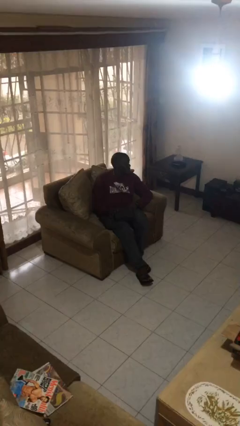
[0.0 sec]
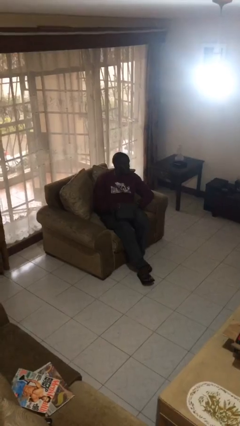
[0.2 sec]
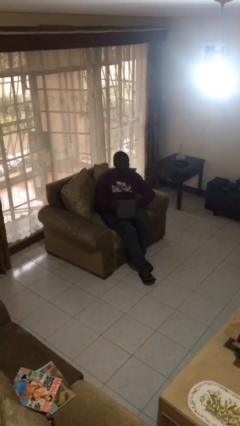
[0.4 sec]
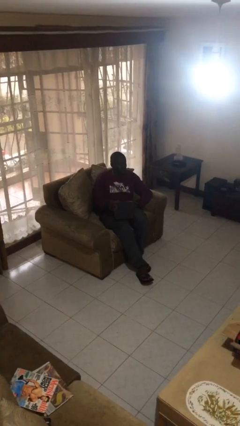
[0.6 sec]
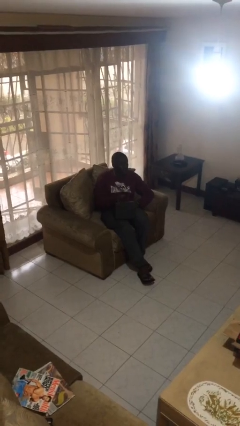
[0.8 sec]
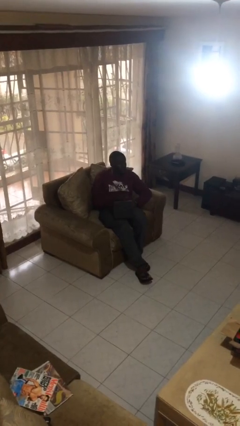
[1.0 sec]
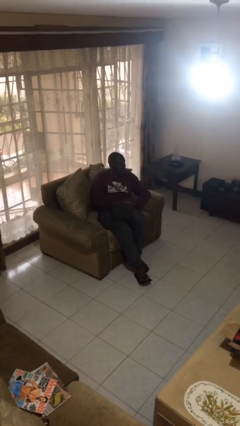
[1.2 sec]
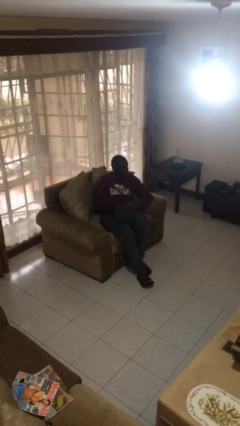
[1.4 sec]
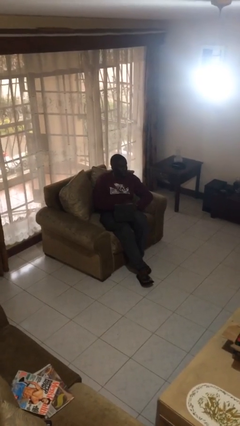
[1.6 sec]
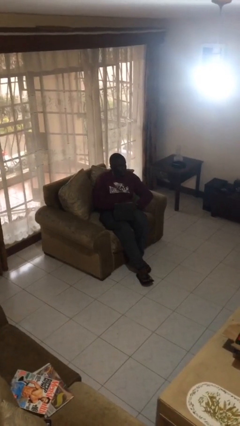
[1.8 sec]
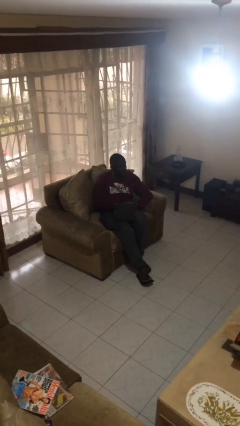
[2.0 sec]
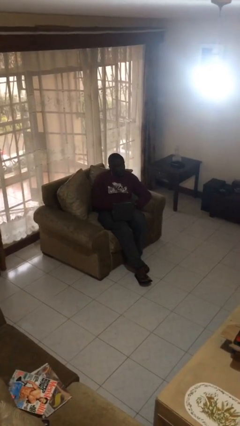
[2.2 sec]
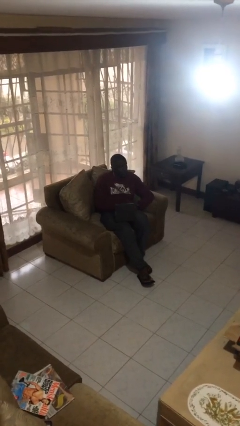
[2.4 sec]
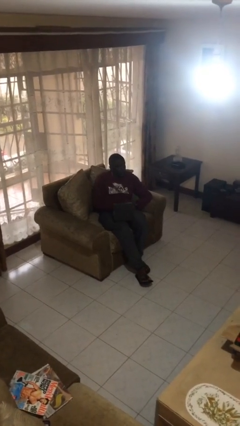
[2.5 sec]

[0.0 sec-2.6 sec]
person opens jewelry box

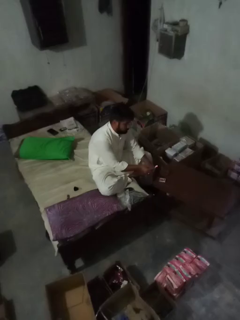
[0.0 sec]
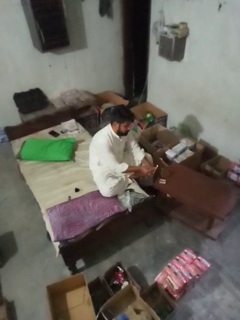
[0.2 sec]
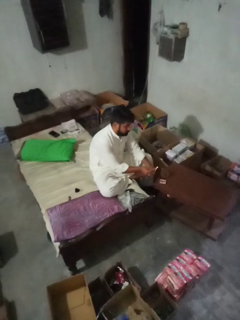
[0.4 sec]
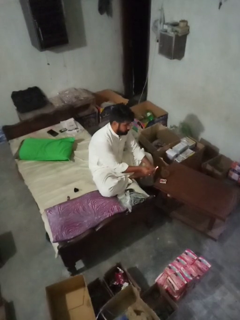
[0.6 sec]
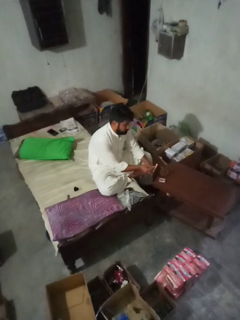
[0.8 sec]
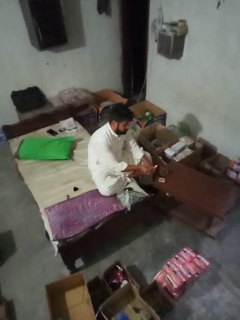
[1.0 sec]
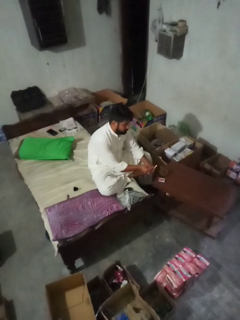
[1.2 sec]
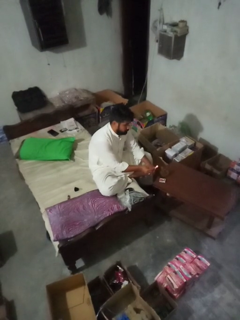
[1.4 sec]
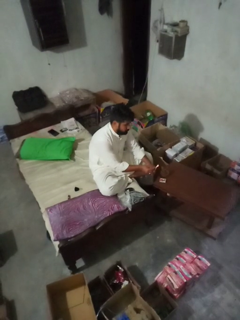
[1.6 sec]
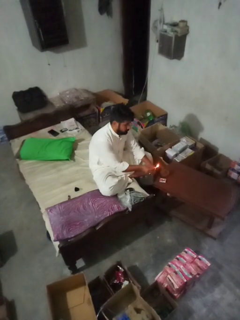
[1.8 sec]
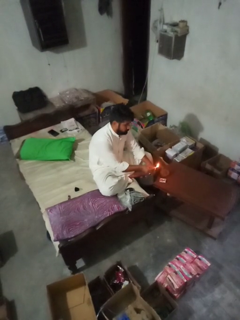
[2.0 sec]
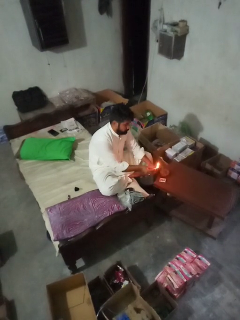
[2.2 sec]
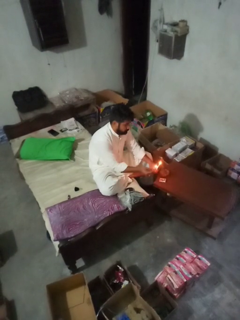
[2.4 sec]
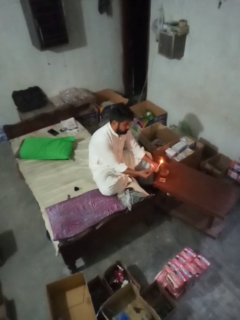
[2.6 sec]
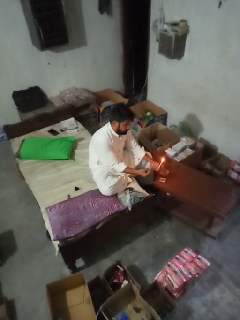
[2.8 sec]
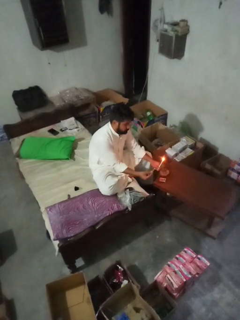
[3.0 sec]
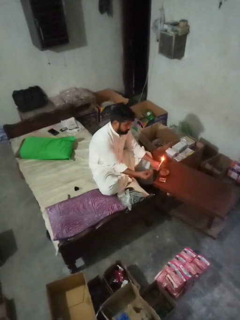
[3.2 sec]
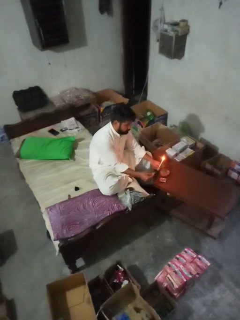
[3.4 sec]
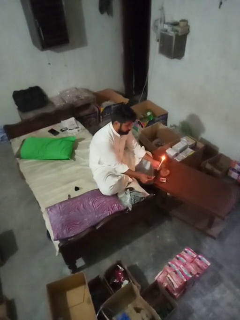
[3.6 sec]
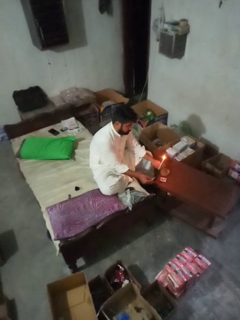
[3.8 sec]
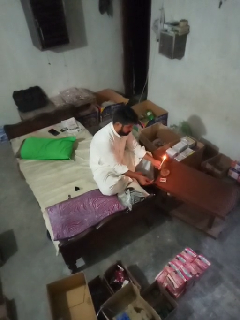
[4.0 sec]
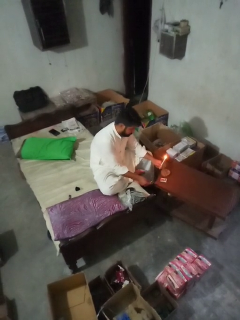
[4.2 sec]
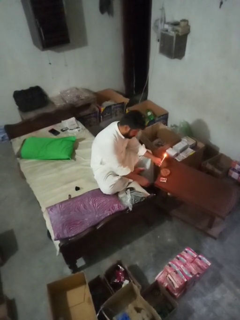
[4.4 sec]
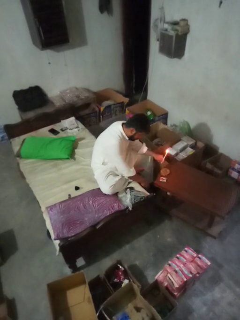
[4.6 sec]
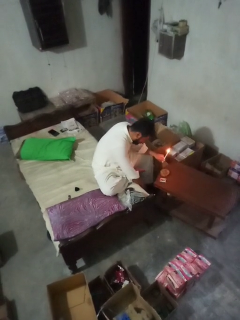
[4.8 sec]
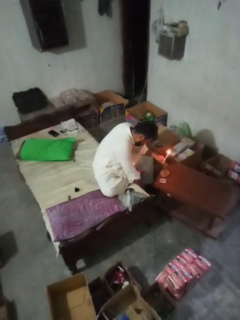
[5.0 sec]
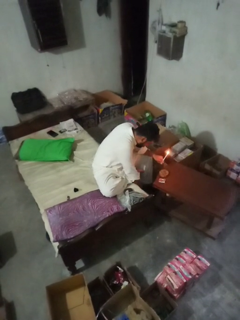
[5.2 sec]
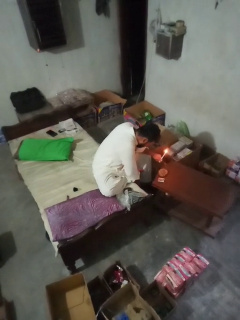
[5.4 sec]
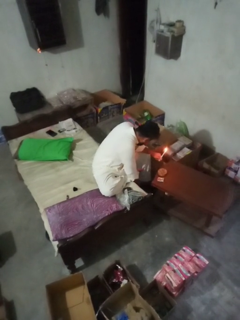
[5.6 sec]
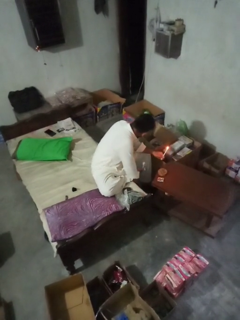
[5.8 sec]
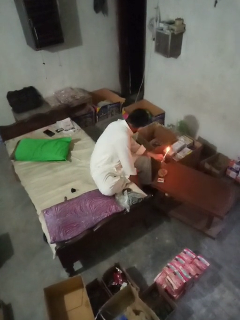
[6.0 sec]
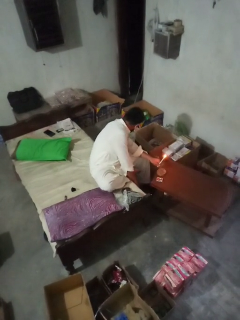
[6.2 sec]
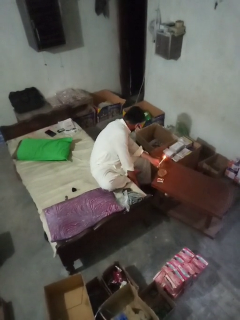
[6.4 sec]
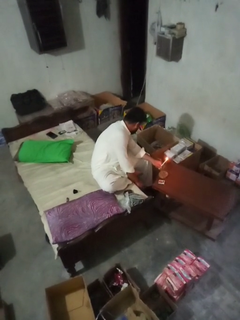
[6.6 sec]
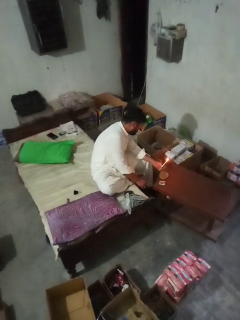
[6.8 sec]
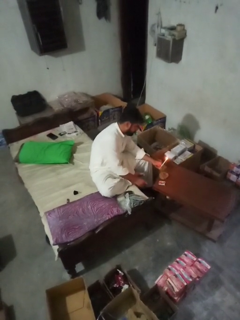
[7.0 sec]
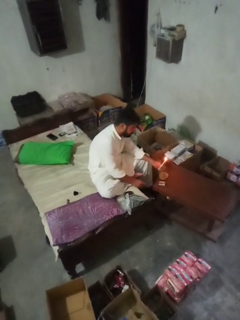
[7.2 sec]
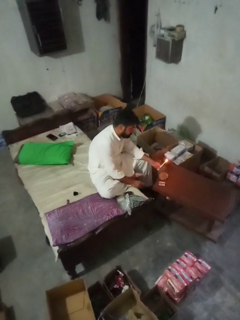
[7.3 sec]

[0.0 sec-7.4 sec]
person lights candle

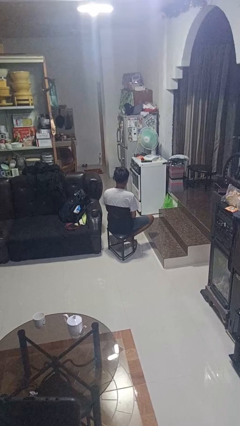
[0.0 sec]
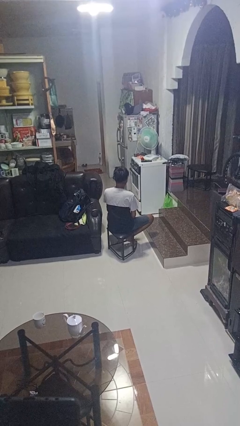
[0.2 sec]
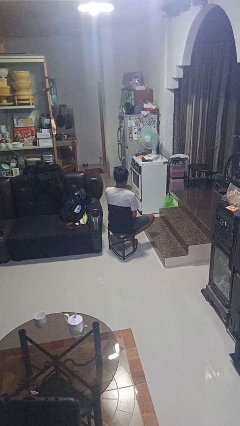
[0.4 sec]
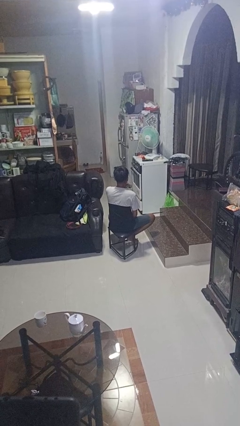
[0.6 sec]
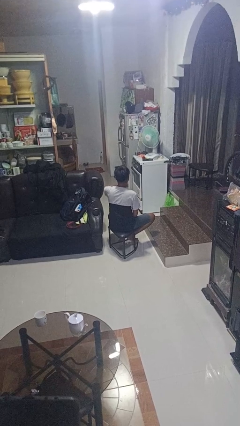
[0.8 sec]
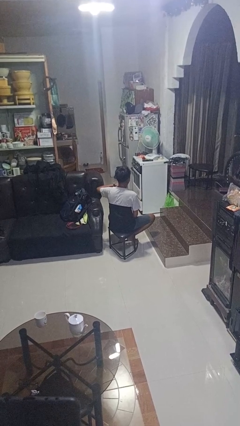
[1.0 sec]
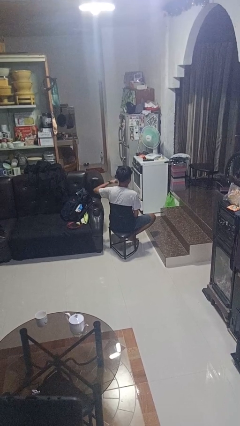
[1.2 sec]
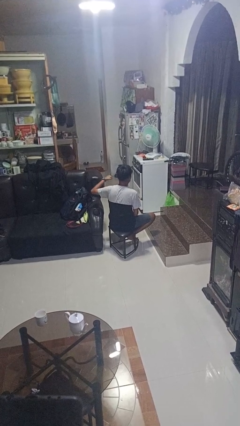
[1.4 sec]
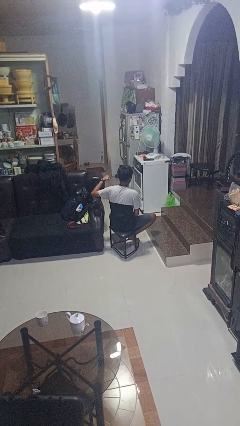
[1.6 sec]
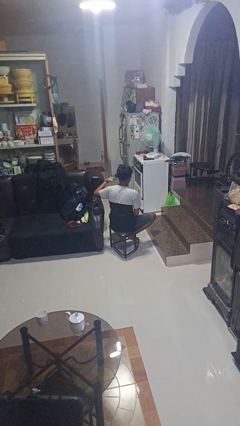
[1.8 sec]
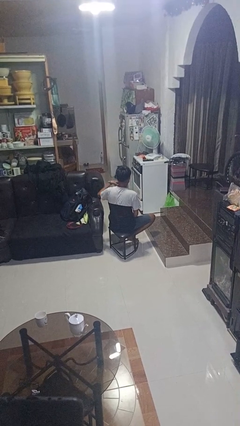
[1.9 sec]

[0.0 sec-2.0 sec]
person gestures cut

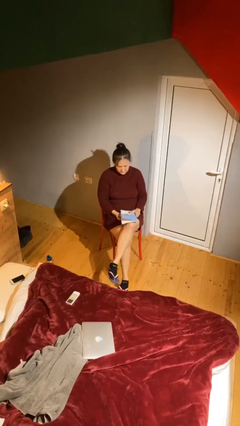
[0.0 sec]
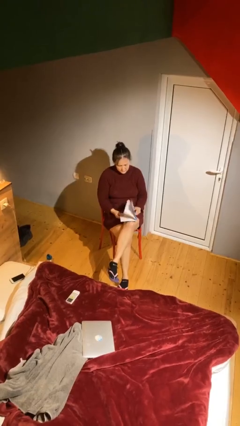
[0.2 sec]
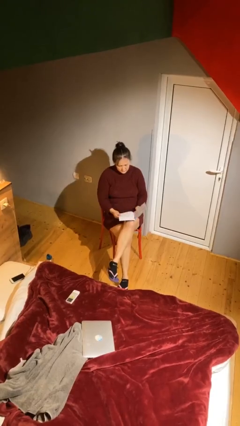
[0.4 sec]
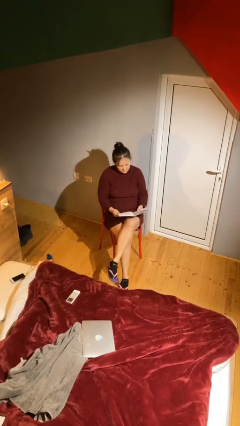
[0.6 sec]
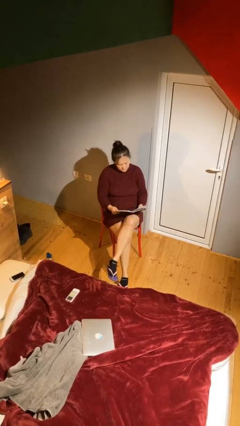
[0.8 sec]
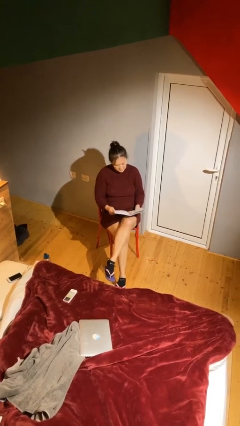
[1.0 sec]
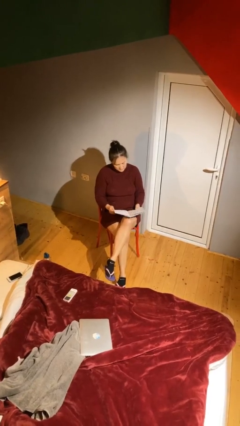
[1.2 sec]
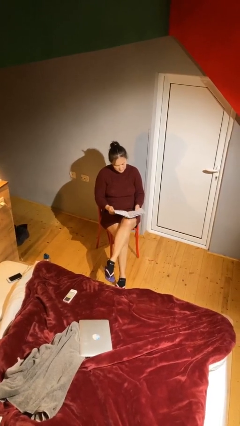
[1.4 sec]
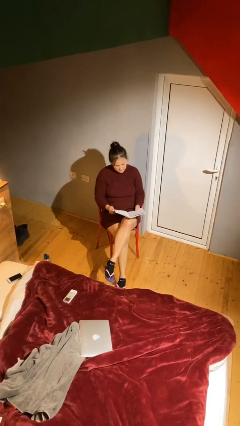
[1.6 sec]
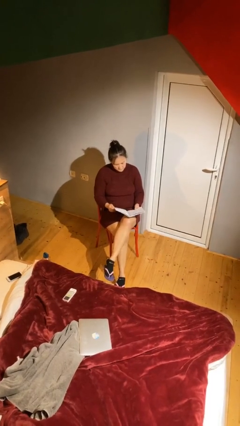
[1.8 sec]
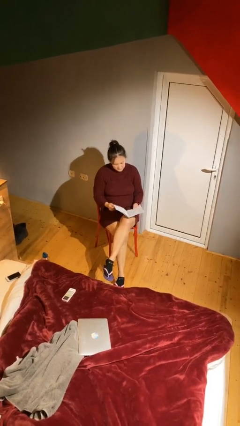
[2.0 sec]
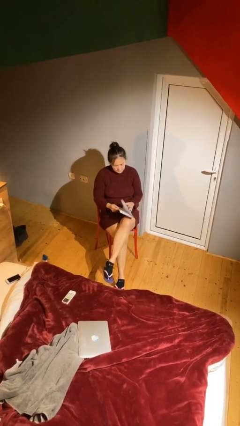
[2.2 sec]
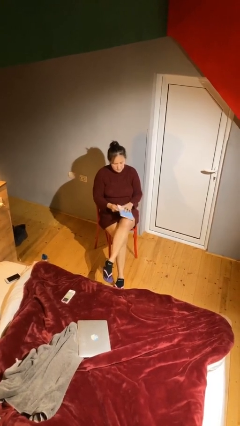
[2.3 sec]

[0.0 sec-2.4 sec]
person reads document

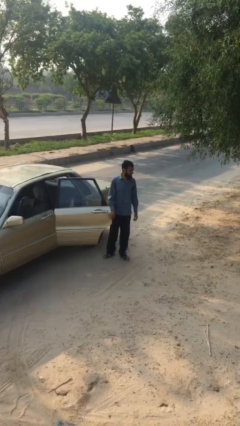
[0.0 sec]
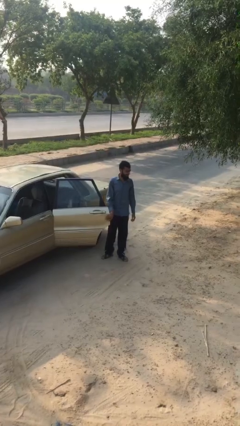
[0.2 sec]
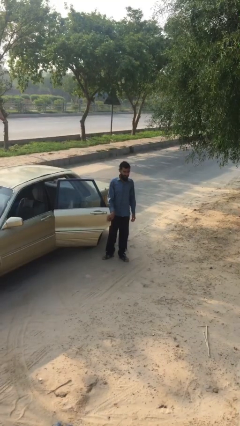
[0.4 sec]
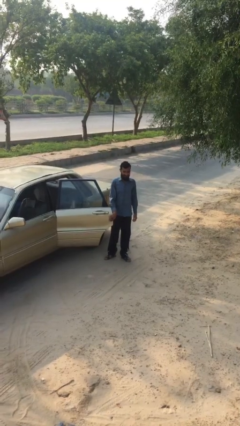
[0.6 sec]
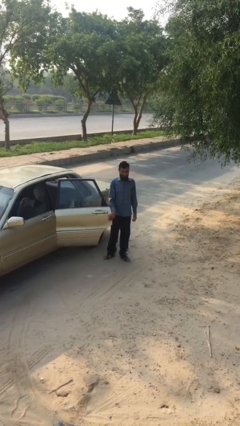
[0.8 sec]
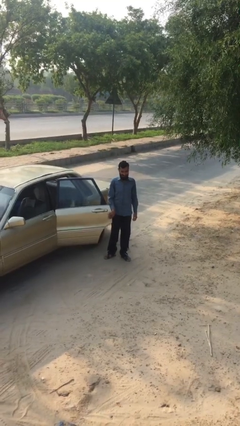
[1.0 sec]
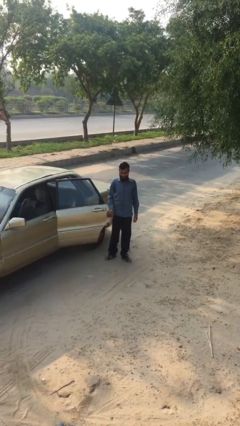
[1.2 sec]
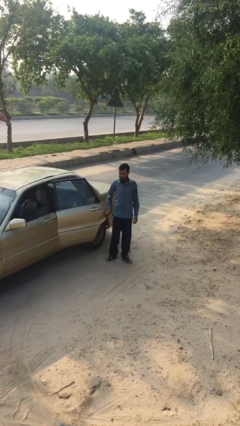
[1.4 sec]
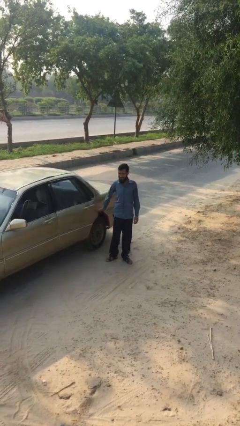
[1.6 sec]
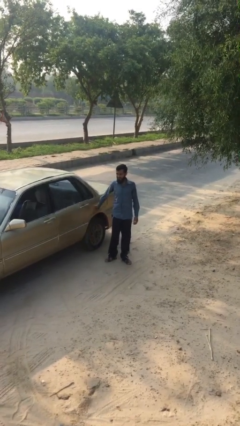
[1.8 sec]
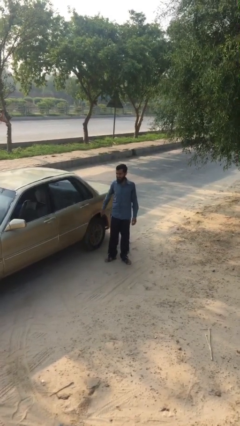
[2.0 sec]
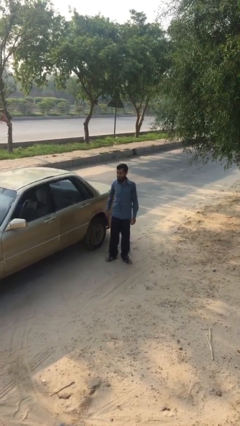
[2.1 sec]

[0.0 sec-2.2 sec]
person closes car door

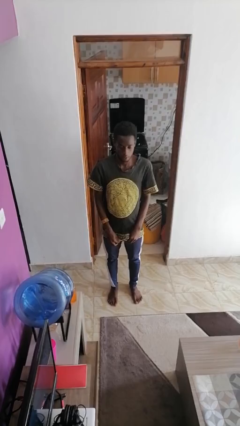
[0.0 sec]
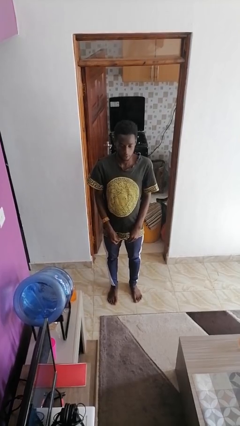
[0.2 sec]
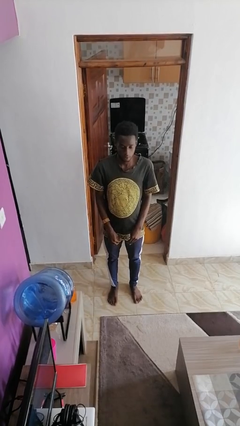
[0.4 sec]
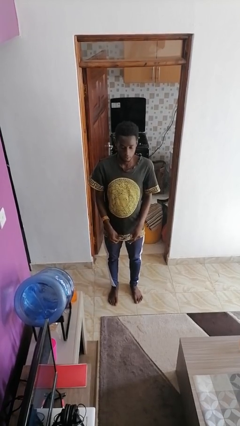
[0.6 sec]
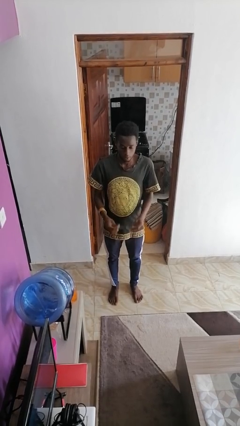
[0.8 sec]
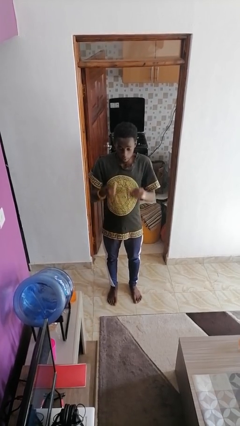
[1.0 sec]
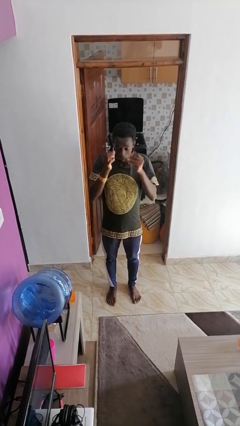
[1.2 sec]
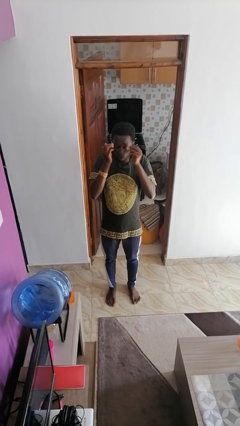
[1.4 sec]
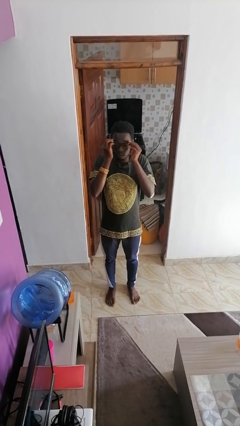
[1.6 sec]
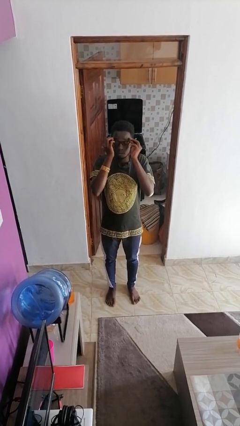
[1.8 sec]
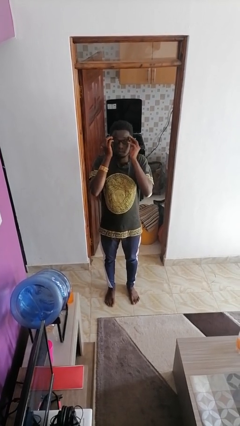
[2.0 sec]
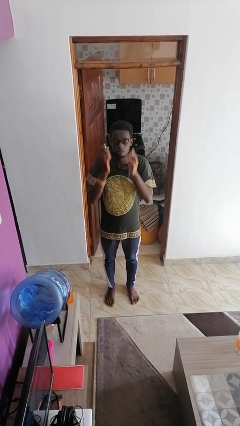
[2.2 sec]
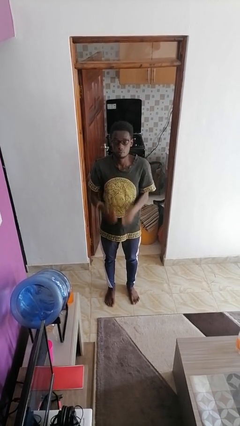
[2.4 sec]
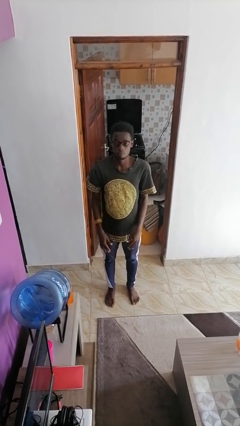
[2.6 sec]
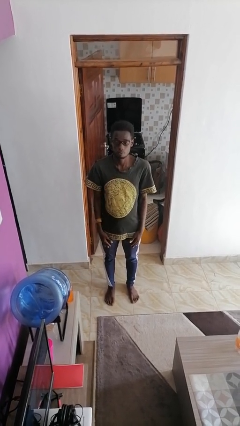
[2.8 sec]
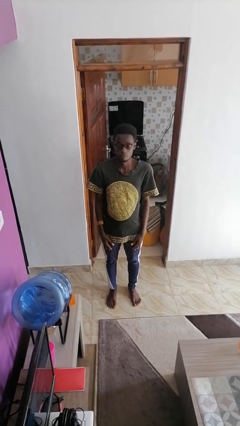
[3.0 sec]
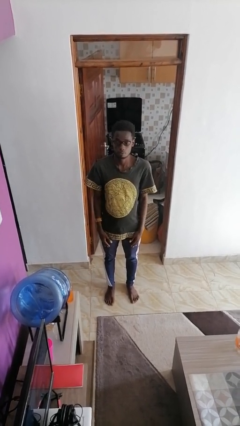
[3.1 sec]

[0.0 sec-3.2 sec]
person puts on glasses
